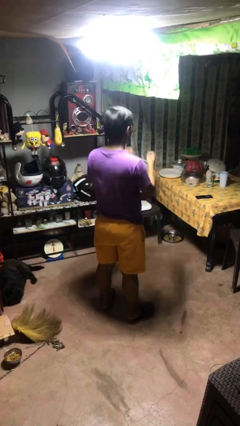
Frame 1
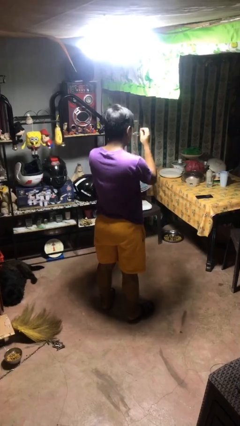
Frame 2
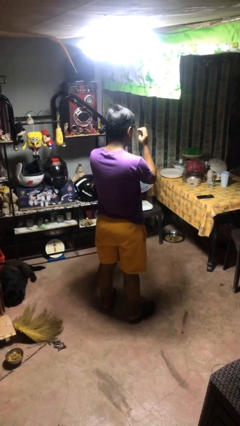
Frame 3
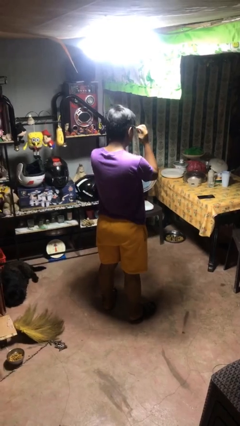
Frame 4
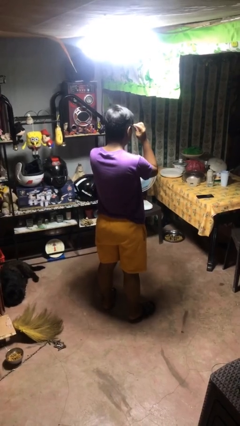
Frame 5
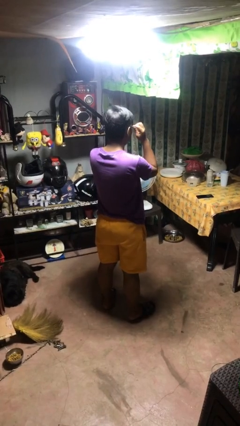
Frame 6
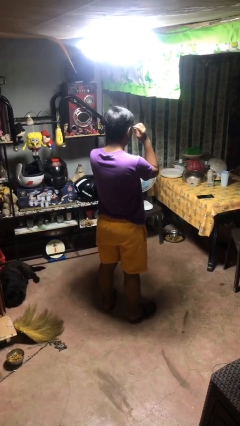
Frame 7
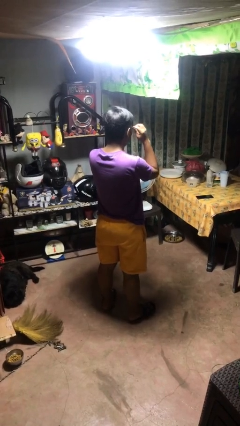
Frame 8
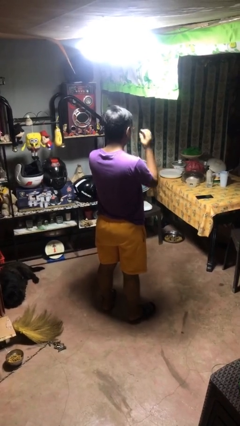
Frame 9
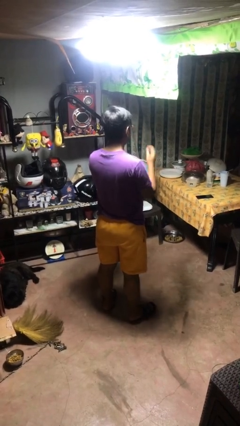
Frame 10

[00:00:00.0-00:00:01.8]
person puts on glasses

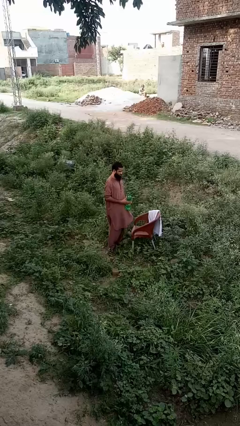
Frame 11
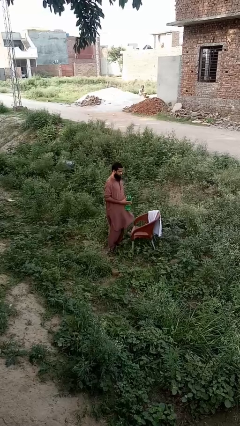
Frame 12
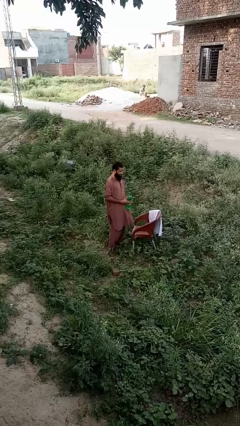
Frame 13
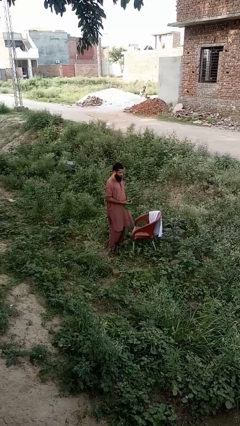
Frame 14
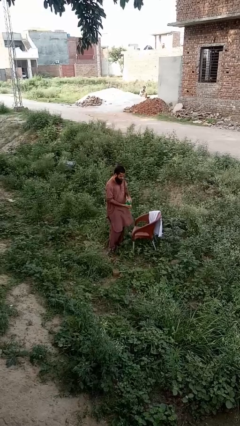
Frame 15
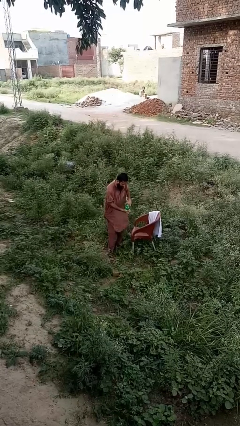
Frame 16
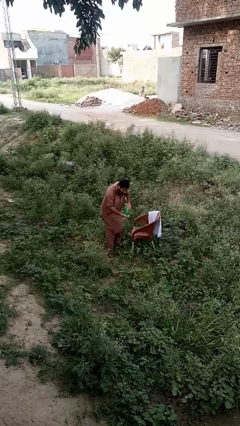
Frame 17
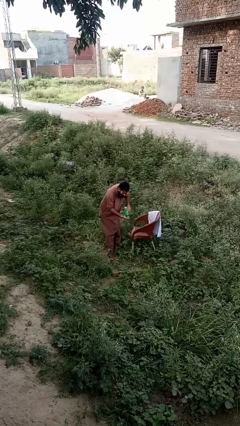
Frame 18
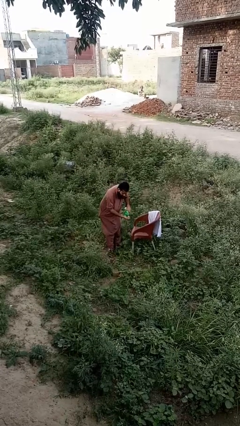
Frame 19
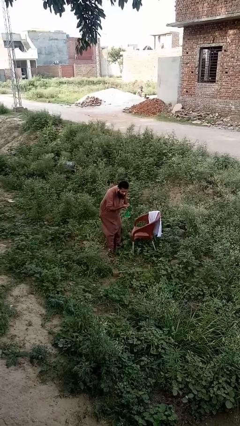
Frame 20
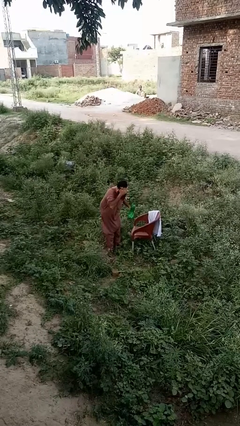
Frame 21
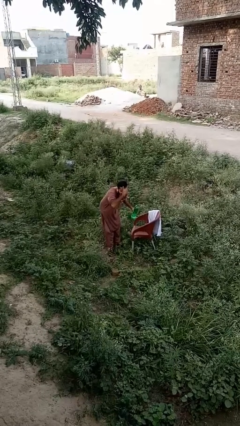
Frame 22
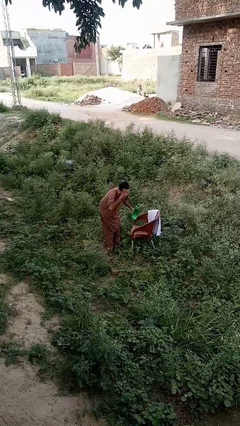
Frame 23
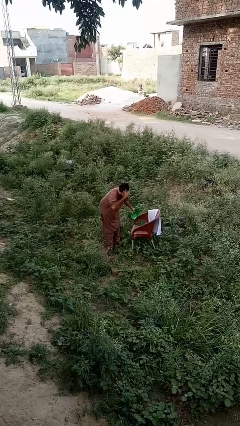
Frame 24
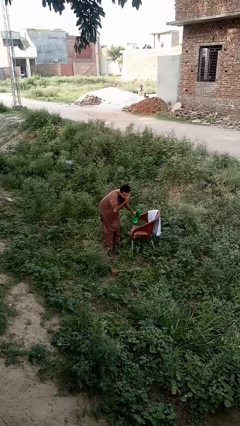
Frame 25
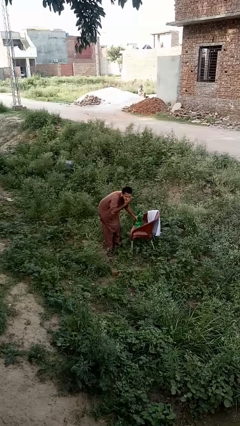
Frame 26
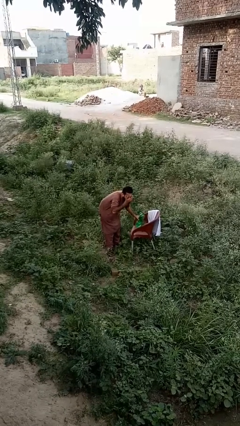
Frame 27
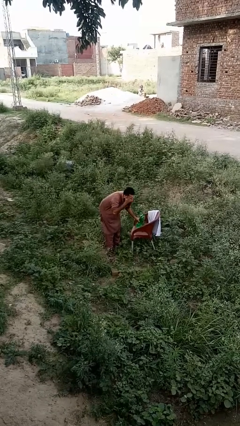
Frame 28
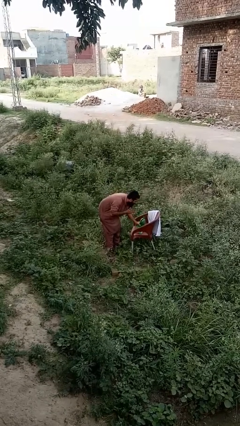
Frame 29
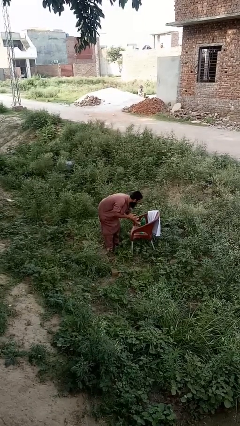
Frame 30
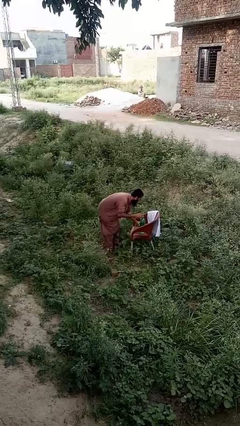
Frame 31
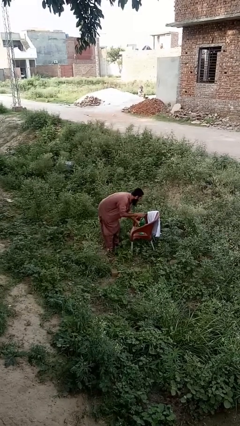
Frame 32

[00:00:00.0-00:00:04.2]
person washes face

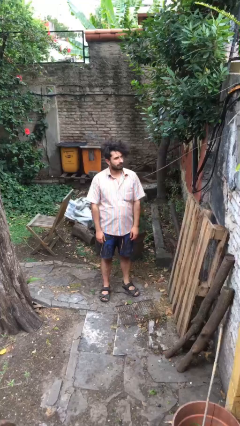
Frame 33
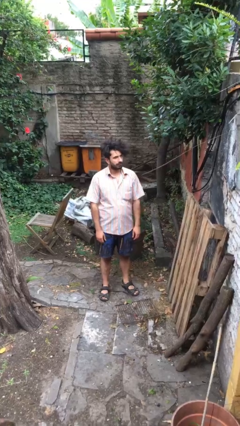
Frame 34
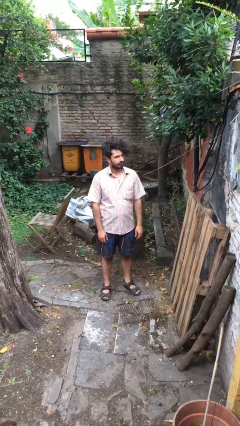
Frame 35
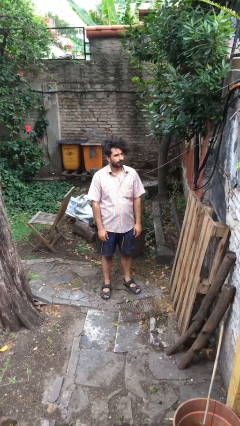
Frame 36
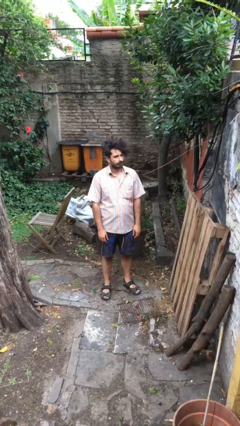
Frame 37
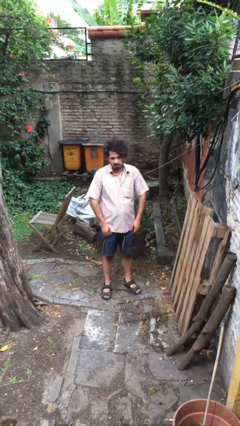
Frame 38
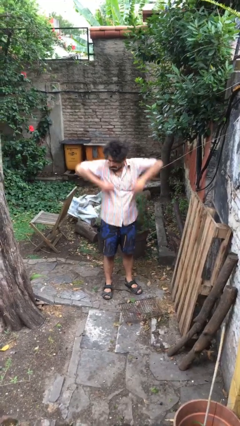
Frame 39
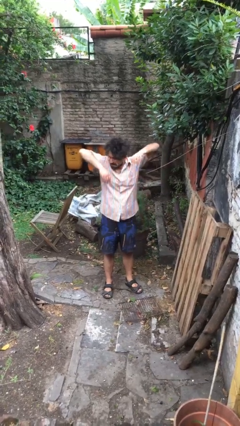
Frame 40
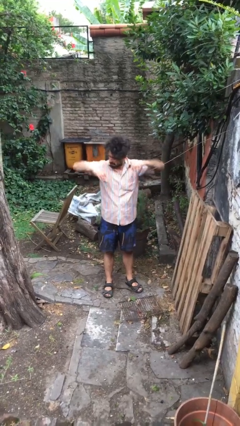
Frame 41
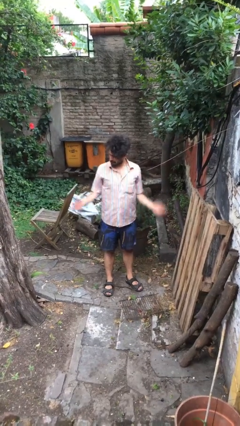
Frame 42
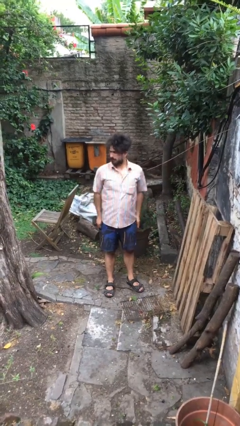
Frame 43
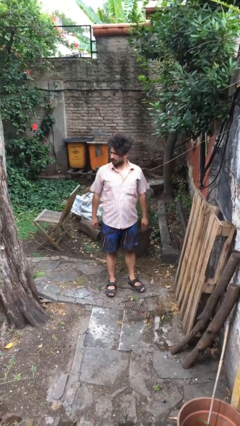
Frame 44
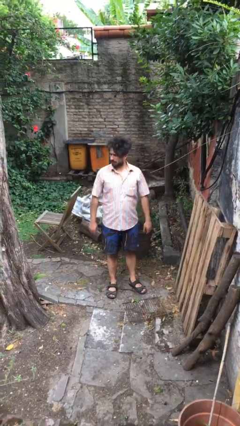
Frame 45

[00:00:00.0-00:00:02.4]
person shrugs

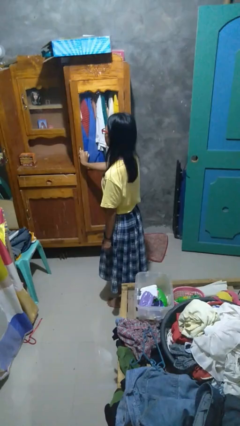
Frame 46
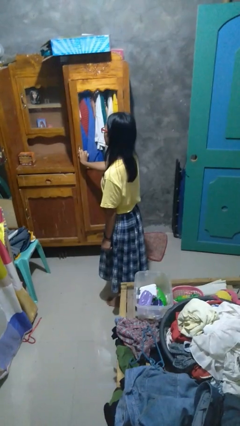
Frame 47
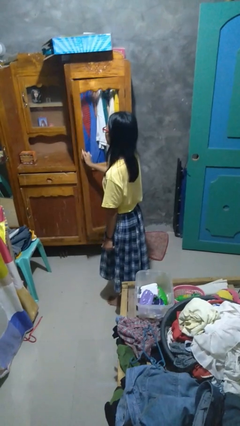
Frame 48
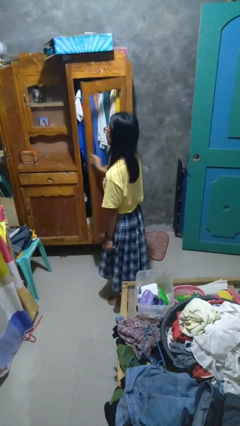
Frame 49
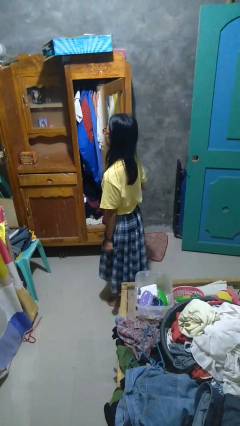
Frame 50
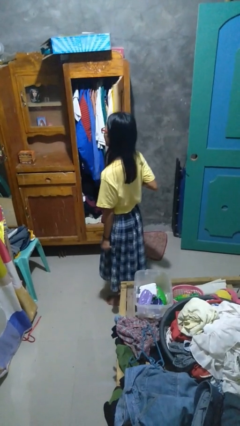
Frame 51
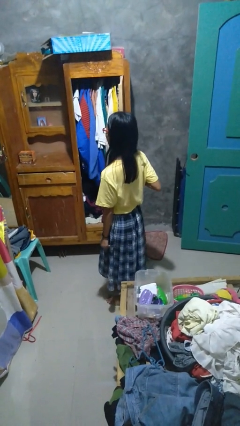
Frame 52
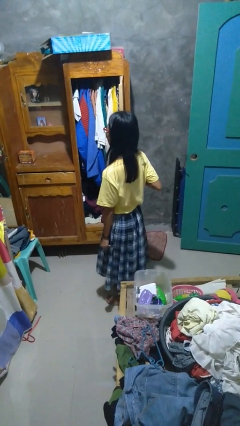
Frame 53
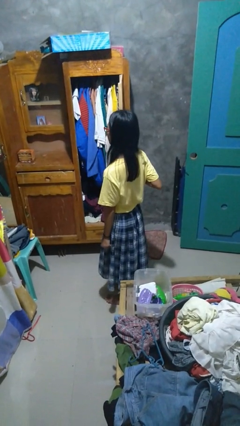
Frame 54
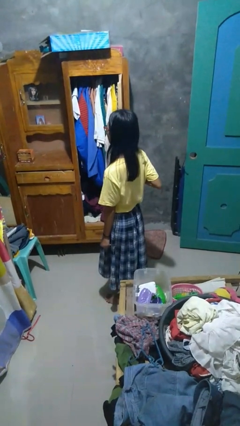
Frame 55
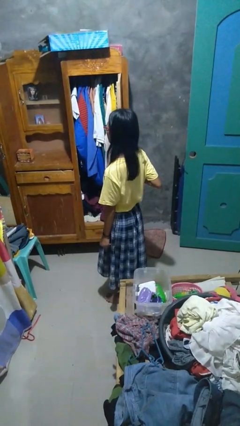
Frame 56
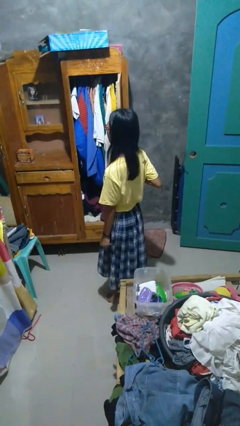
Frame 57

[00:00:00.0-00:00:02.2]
person opens closet door

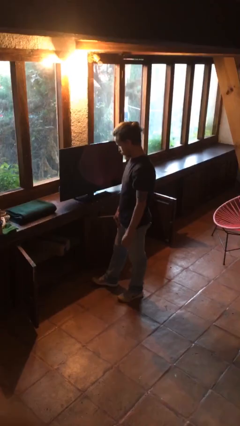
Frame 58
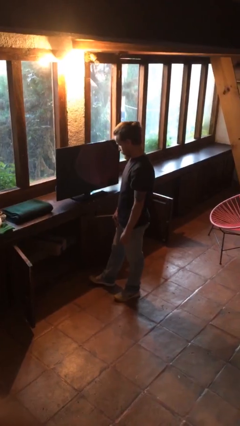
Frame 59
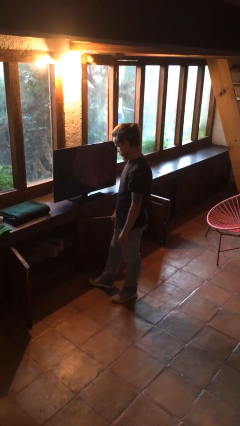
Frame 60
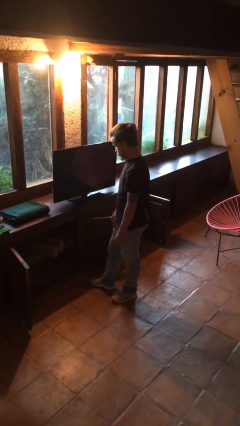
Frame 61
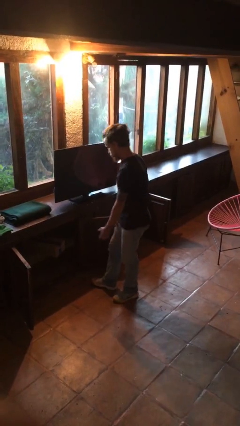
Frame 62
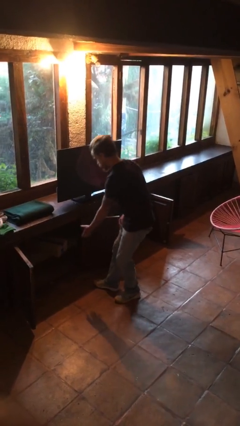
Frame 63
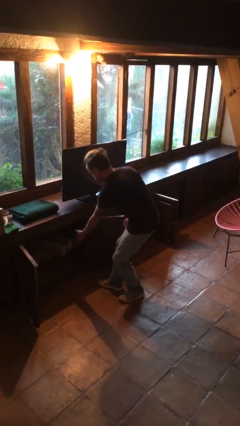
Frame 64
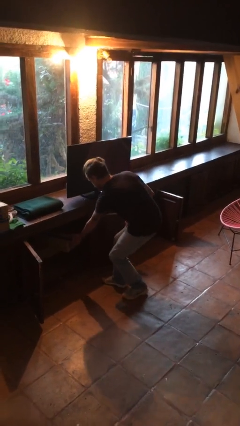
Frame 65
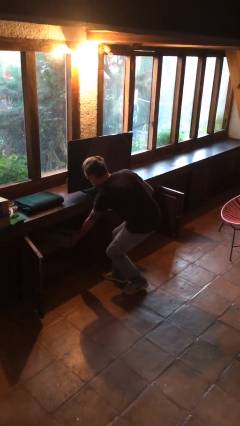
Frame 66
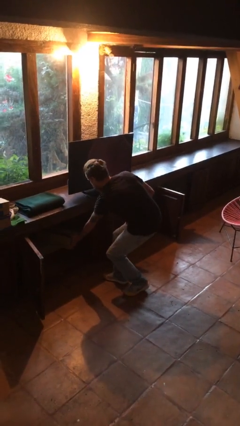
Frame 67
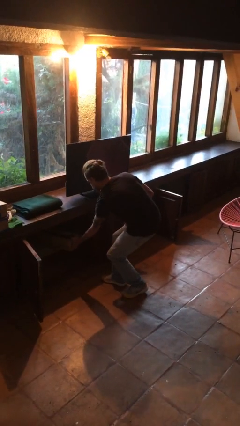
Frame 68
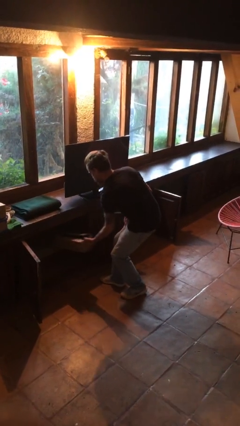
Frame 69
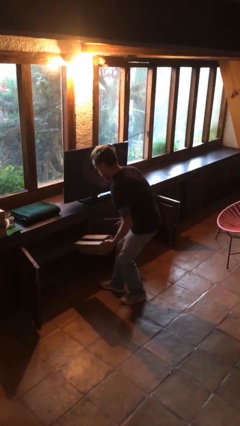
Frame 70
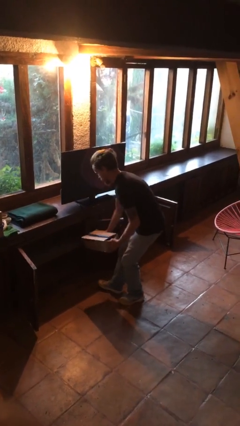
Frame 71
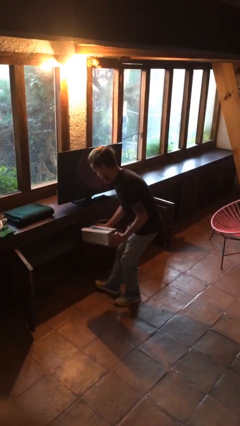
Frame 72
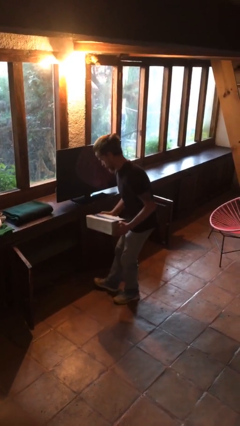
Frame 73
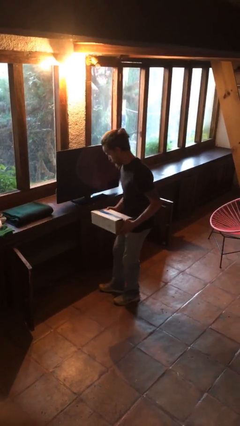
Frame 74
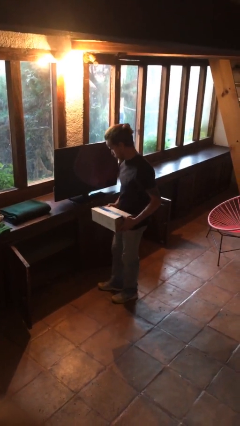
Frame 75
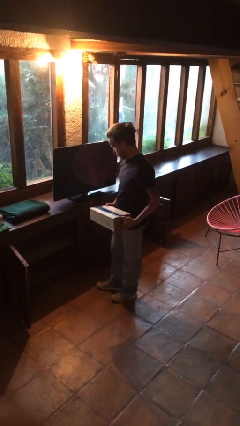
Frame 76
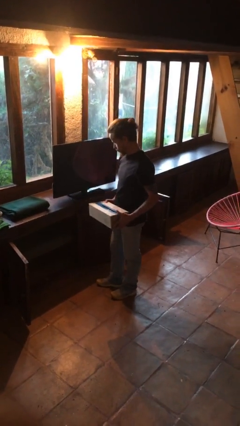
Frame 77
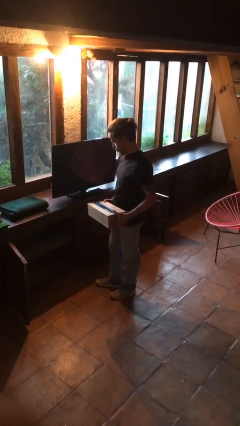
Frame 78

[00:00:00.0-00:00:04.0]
person picks up object from cabinet

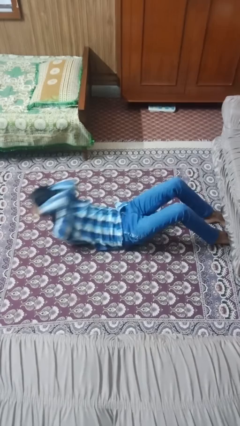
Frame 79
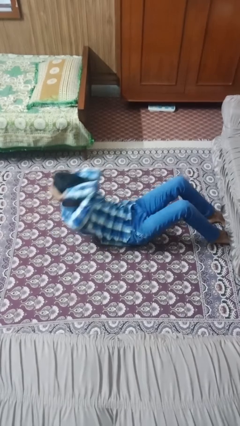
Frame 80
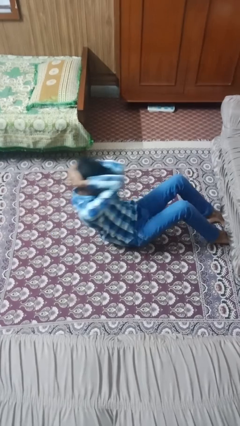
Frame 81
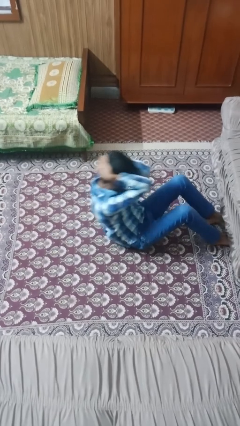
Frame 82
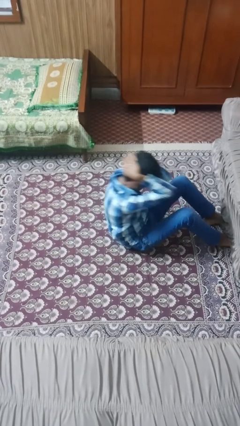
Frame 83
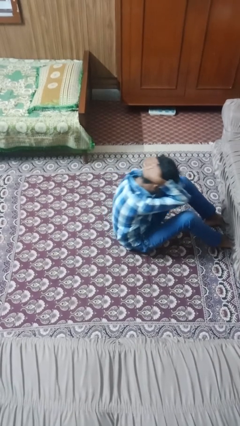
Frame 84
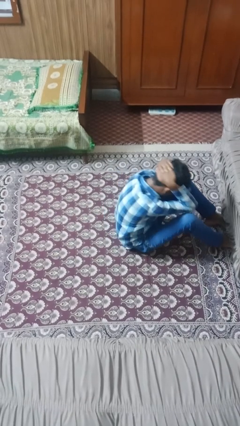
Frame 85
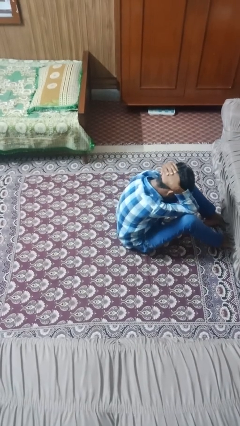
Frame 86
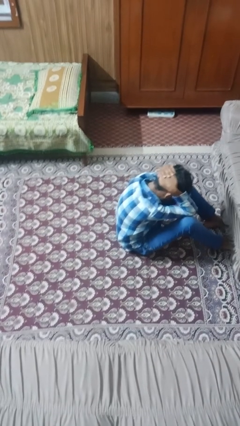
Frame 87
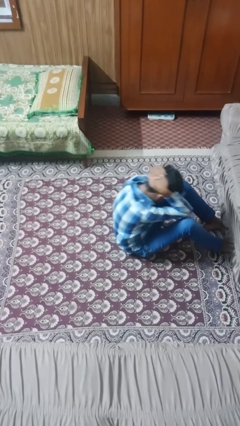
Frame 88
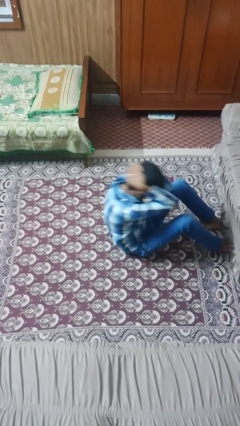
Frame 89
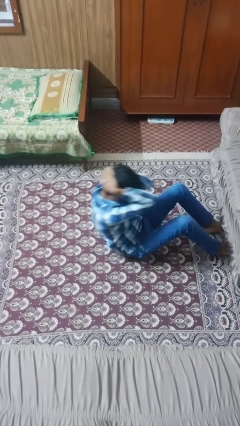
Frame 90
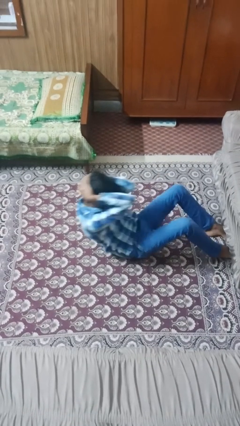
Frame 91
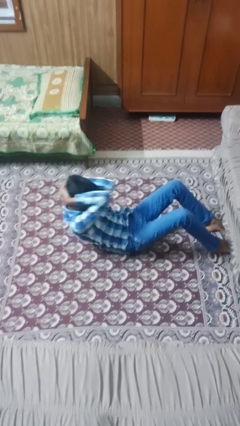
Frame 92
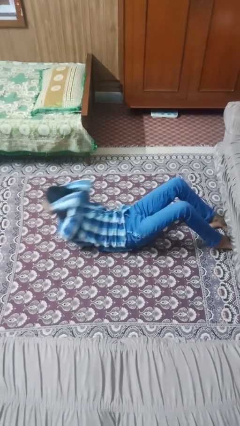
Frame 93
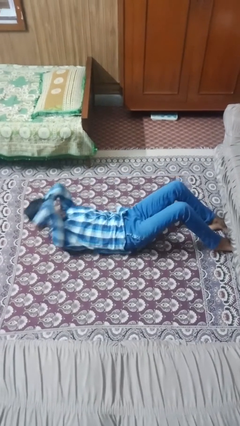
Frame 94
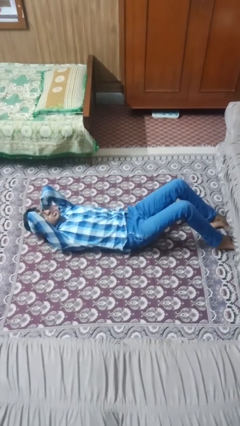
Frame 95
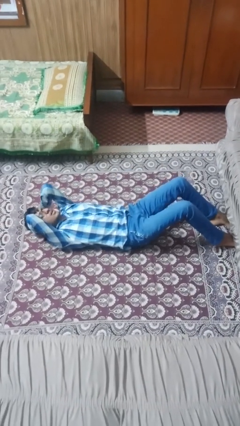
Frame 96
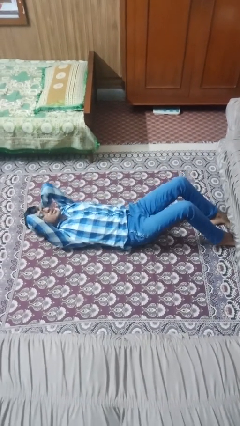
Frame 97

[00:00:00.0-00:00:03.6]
person exercises with situp
